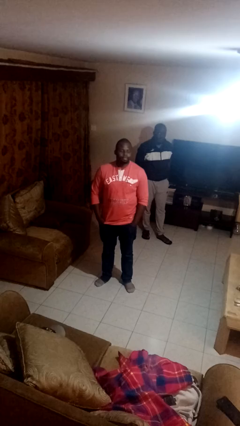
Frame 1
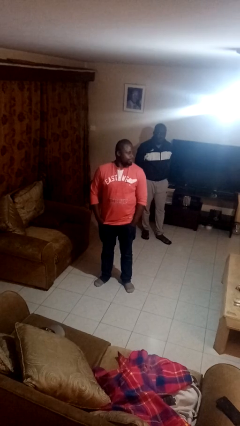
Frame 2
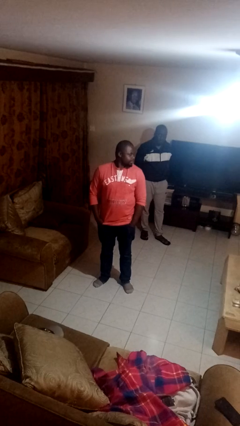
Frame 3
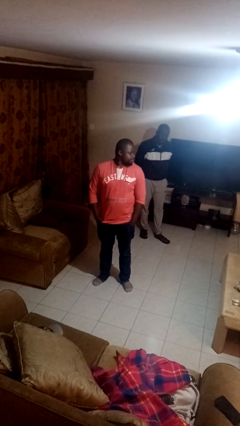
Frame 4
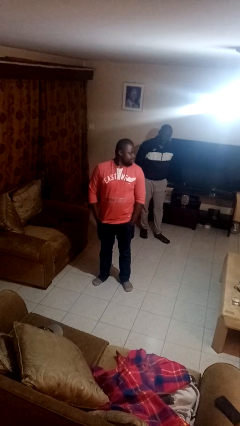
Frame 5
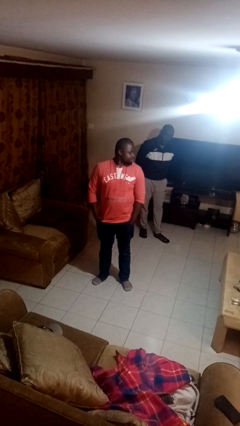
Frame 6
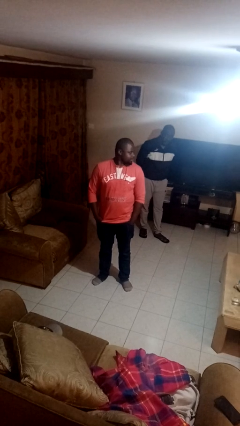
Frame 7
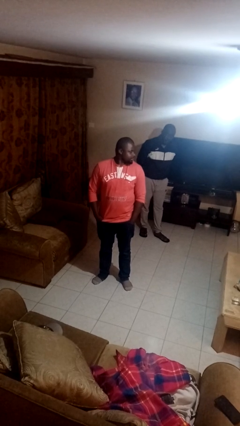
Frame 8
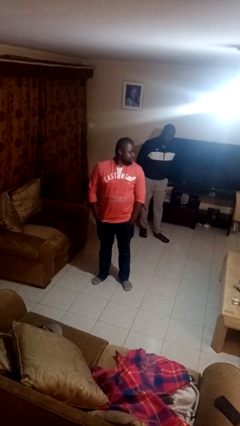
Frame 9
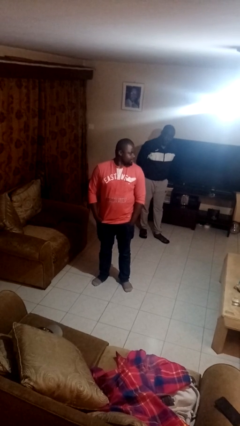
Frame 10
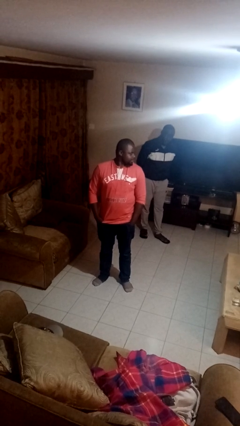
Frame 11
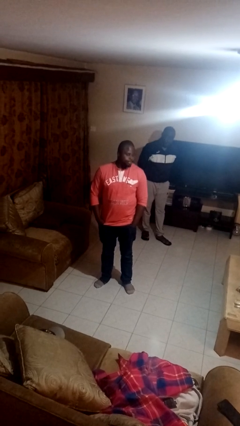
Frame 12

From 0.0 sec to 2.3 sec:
person looks over shoulder

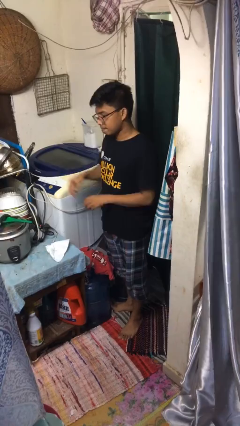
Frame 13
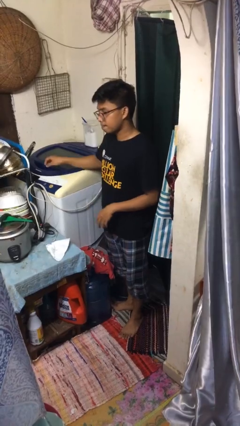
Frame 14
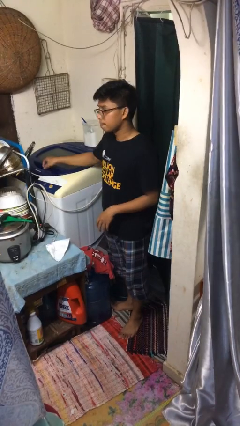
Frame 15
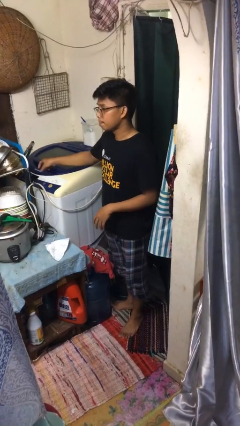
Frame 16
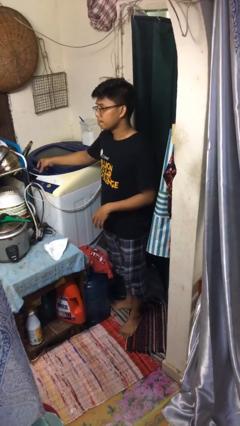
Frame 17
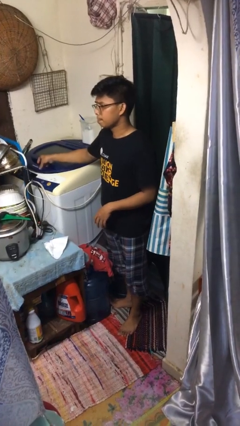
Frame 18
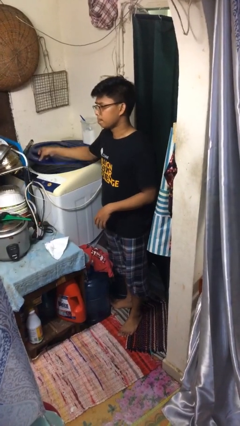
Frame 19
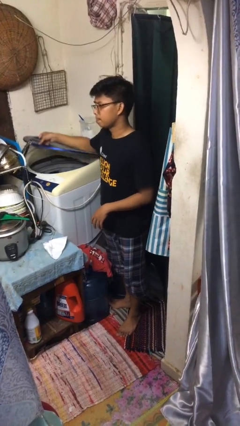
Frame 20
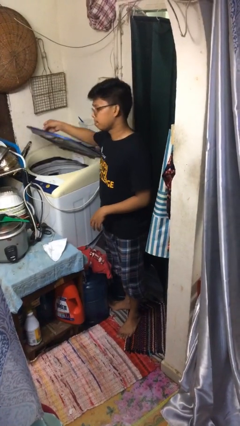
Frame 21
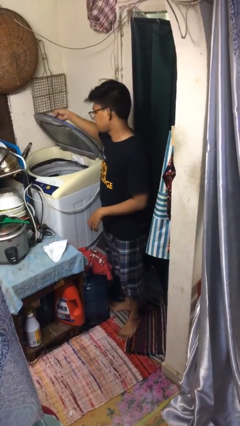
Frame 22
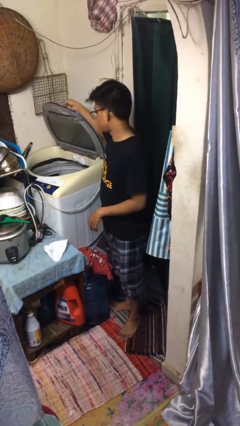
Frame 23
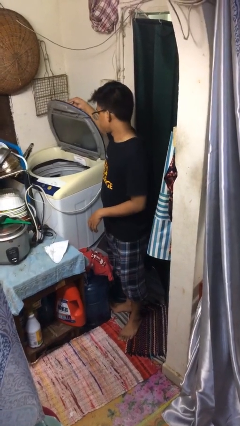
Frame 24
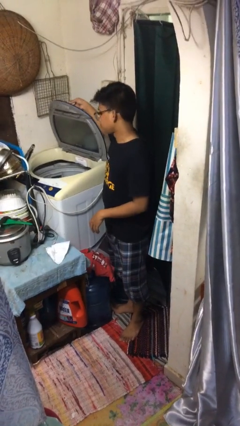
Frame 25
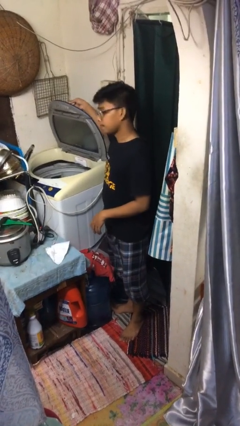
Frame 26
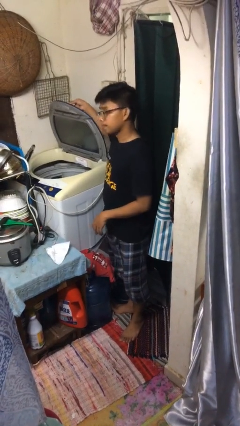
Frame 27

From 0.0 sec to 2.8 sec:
person opens clothes washer

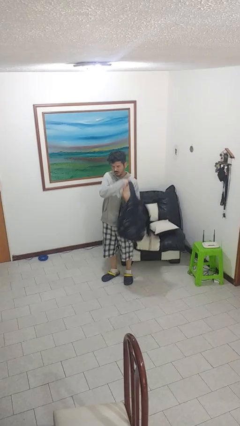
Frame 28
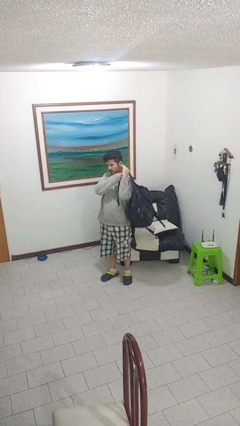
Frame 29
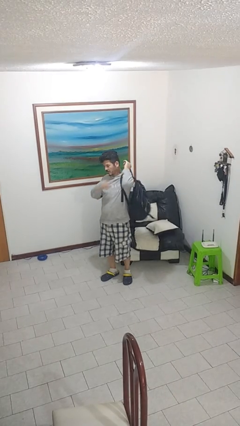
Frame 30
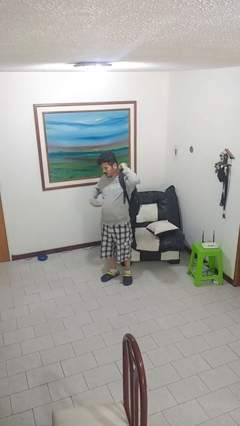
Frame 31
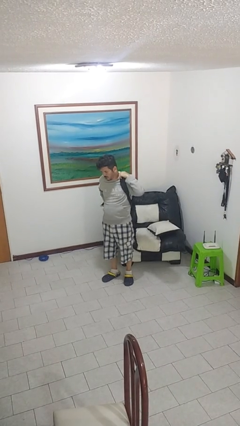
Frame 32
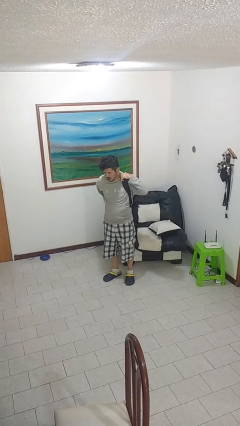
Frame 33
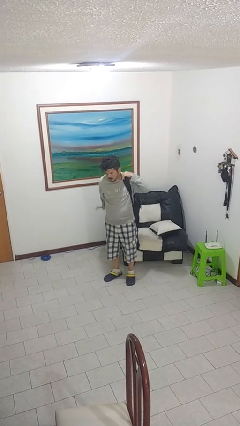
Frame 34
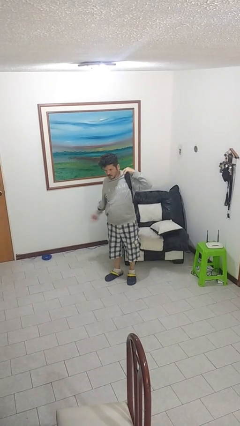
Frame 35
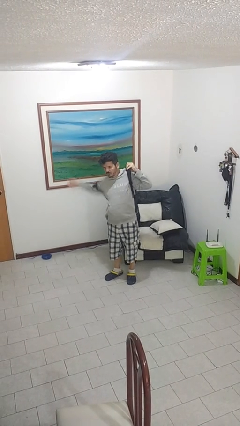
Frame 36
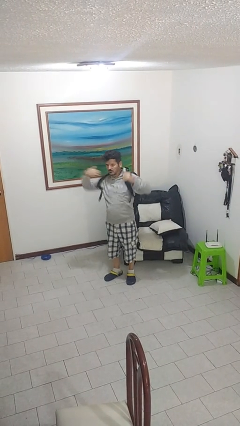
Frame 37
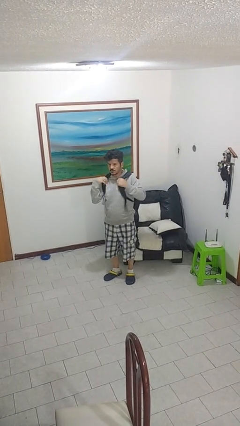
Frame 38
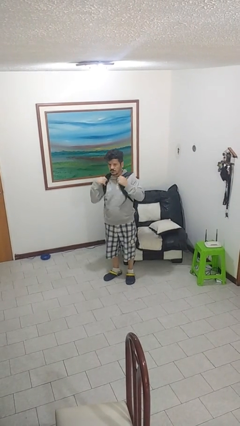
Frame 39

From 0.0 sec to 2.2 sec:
person puts on backpack

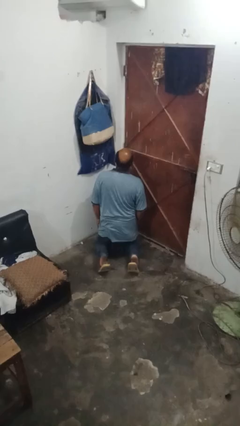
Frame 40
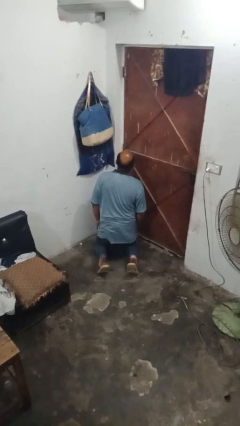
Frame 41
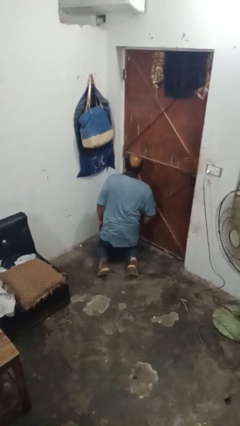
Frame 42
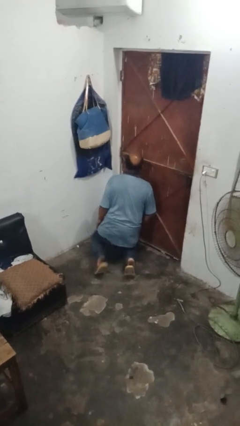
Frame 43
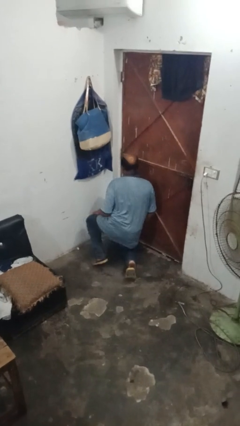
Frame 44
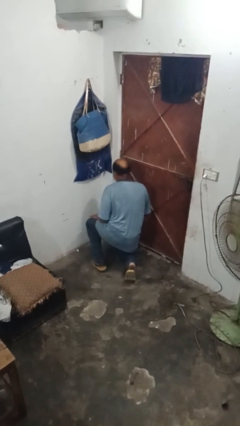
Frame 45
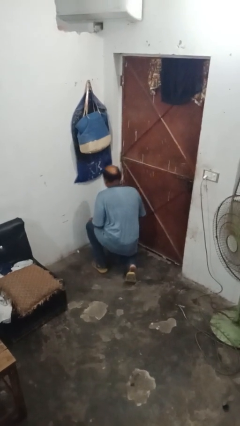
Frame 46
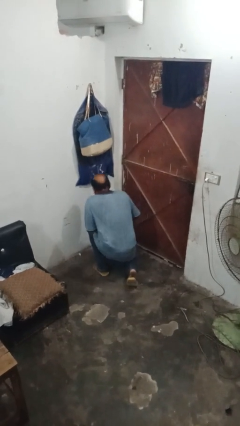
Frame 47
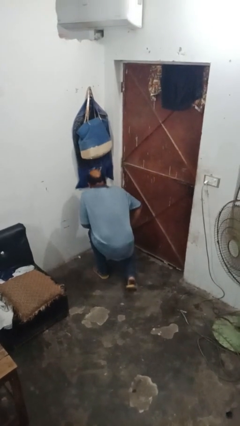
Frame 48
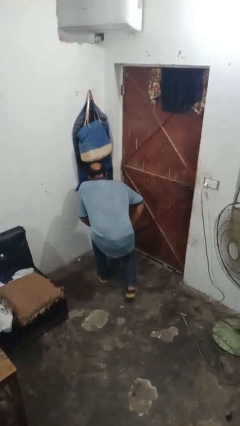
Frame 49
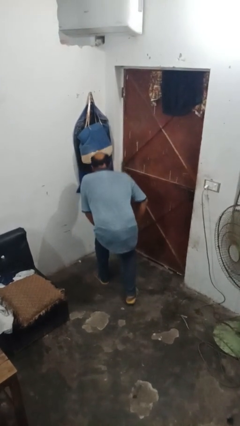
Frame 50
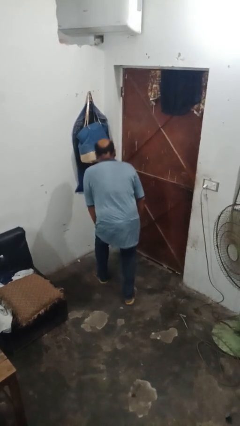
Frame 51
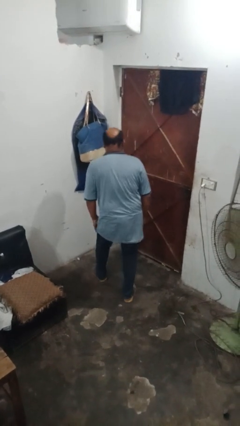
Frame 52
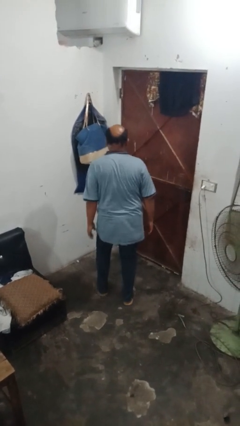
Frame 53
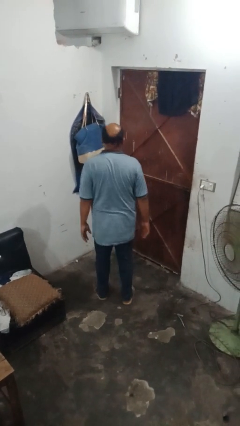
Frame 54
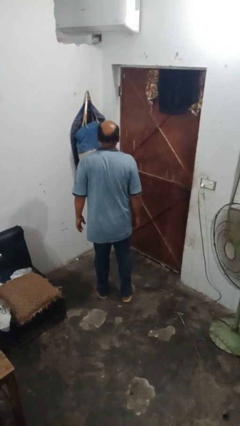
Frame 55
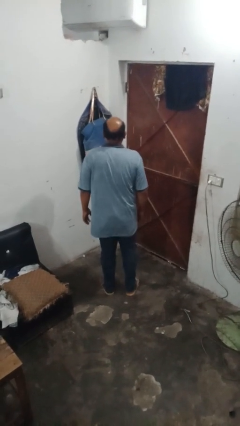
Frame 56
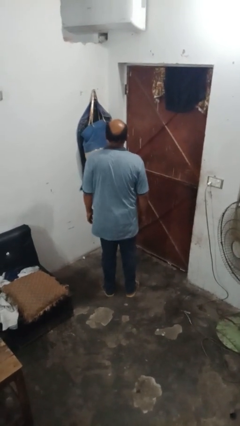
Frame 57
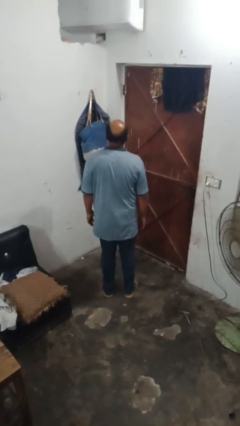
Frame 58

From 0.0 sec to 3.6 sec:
person stands up

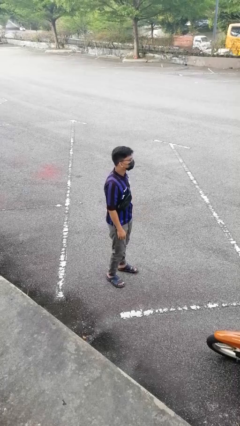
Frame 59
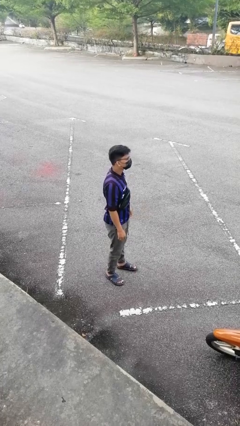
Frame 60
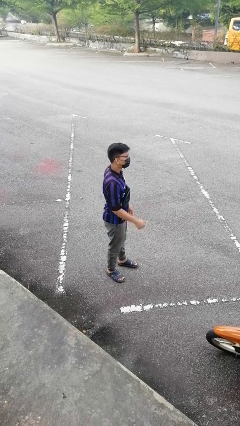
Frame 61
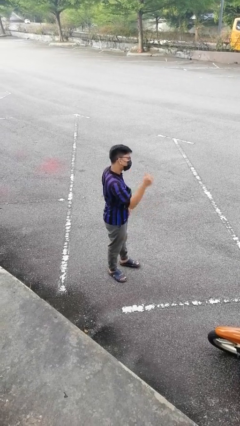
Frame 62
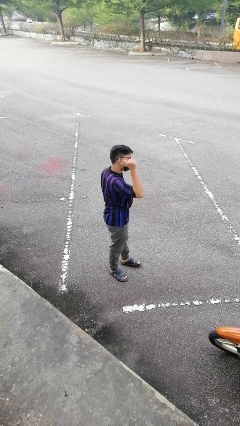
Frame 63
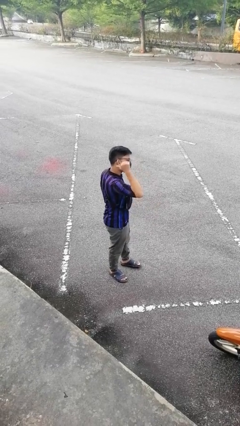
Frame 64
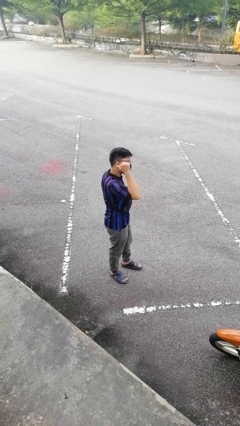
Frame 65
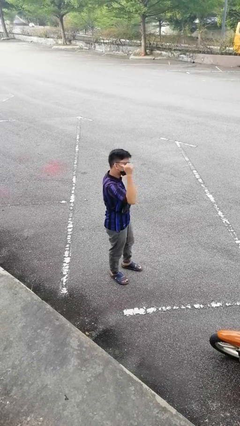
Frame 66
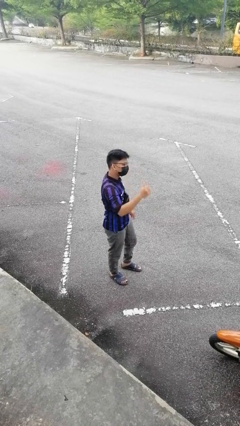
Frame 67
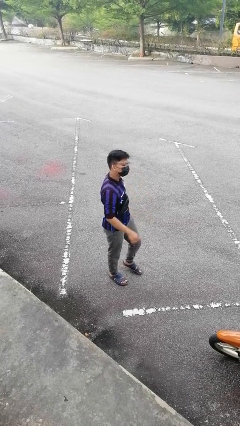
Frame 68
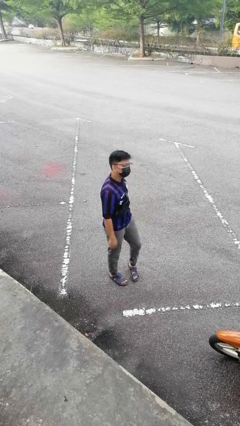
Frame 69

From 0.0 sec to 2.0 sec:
person gestures behind me

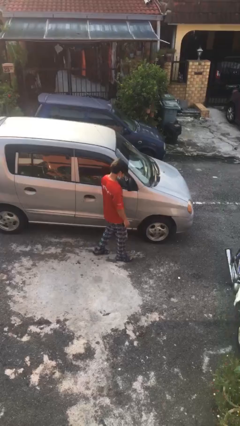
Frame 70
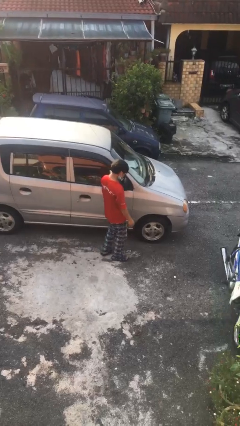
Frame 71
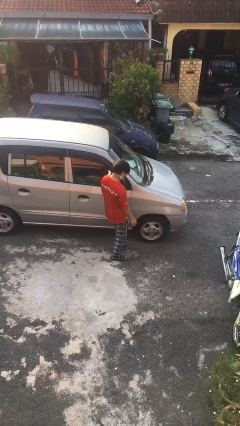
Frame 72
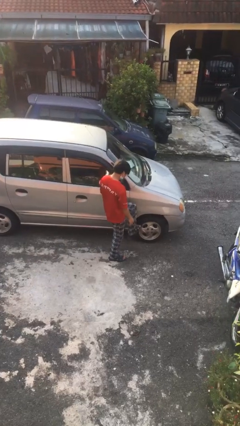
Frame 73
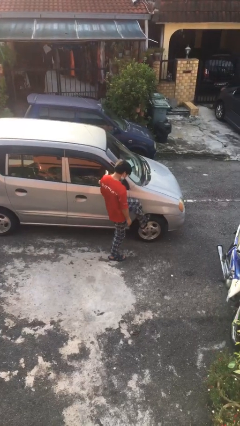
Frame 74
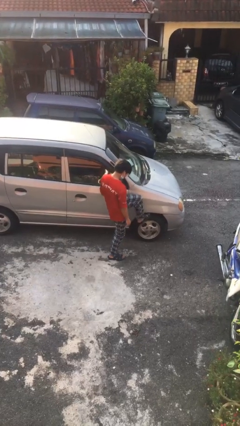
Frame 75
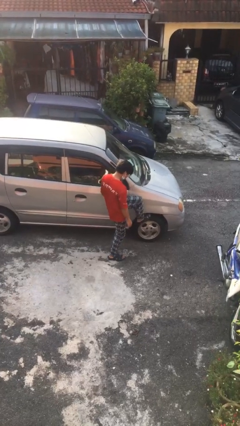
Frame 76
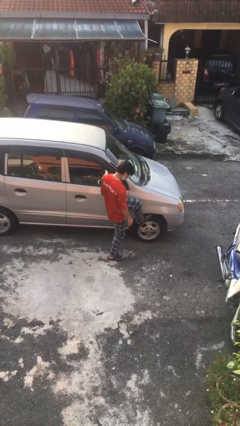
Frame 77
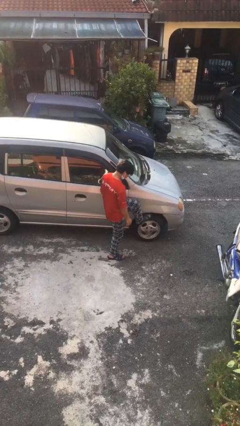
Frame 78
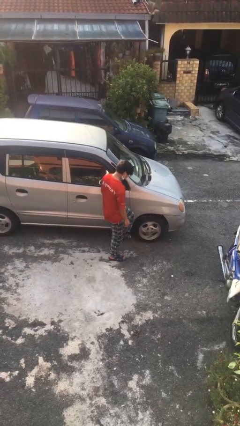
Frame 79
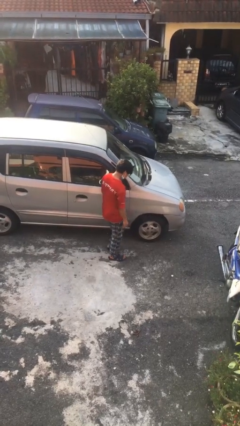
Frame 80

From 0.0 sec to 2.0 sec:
person kicks car tires

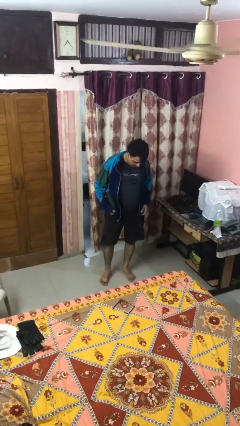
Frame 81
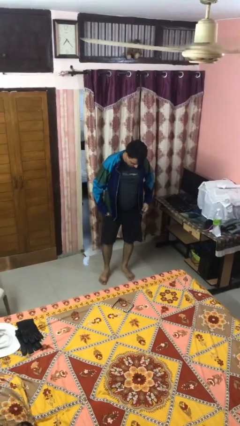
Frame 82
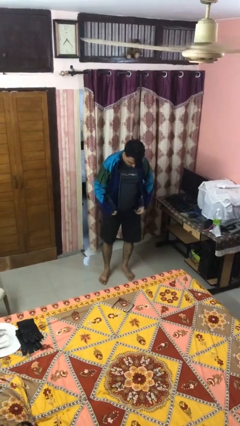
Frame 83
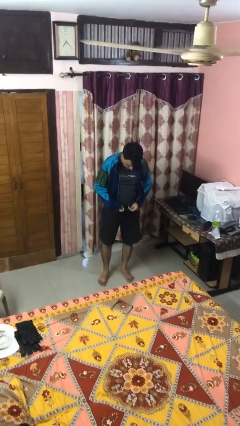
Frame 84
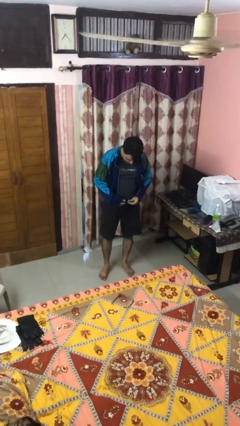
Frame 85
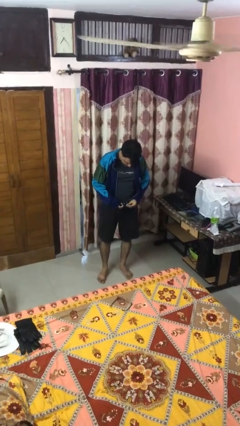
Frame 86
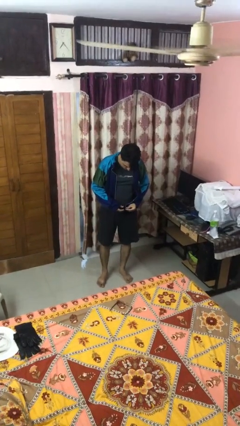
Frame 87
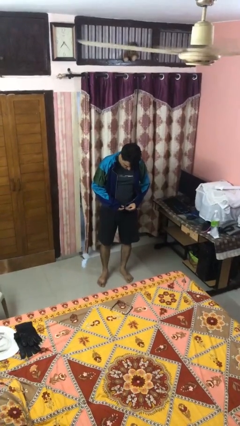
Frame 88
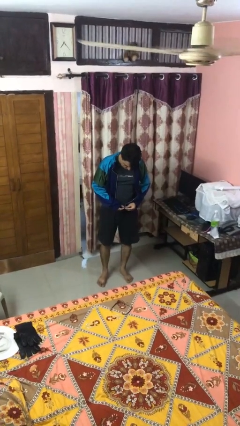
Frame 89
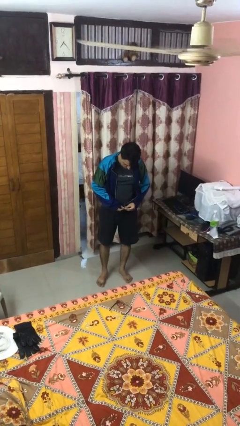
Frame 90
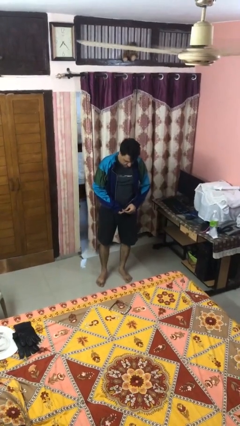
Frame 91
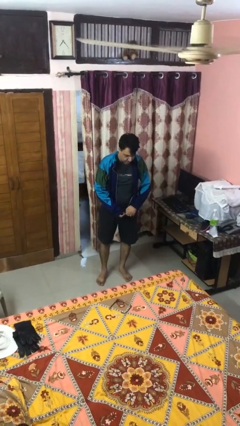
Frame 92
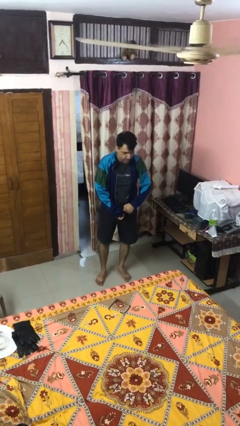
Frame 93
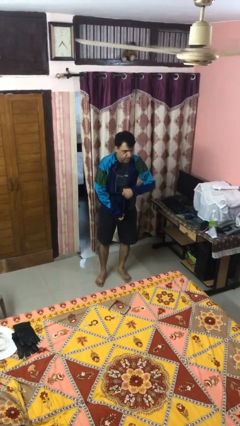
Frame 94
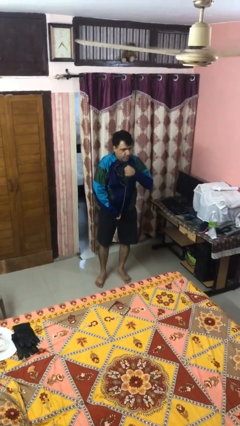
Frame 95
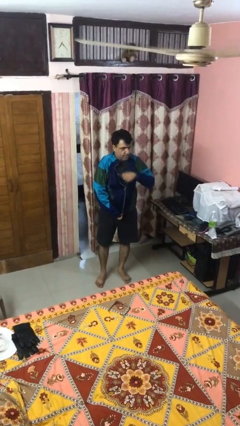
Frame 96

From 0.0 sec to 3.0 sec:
person zips up jacket
